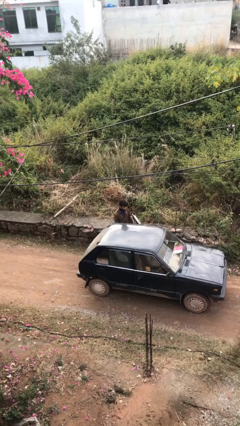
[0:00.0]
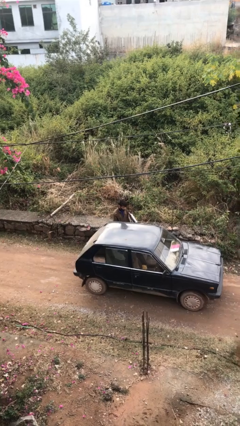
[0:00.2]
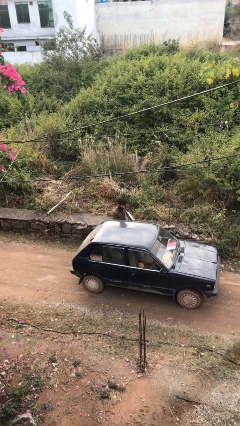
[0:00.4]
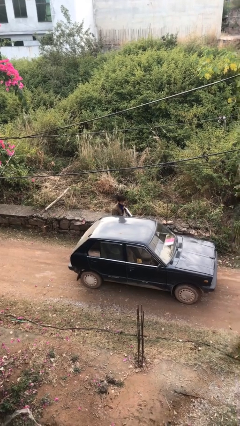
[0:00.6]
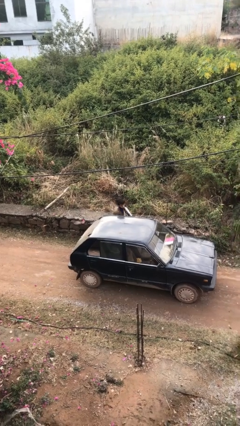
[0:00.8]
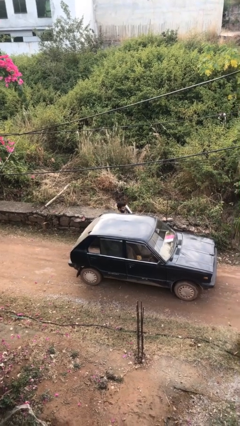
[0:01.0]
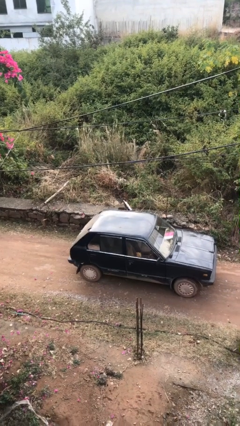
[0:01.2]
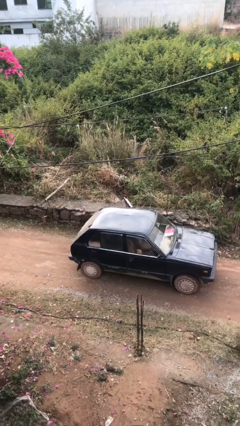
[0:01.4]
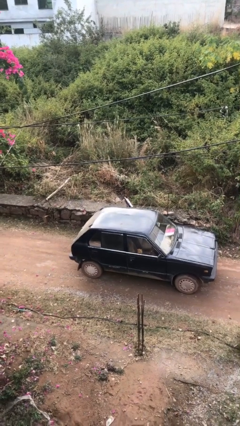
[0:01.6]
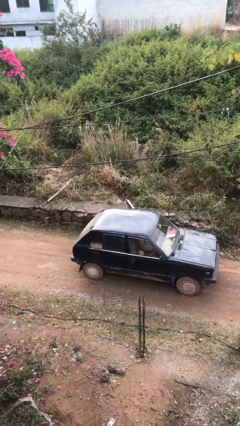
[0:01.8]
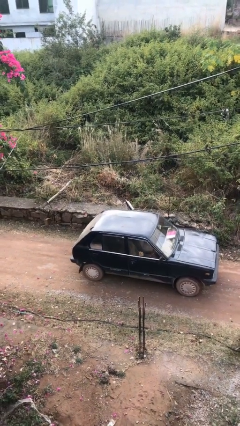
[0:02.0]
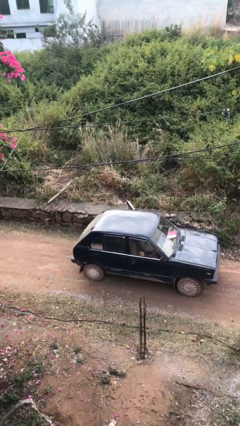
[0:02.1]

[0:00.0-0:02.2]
person enters car

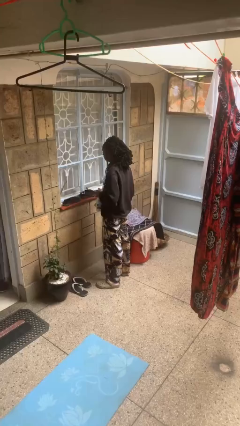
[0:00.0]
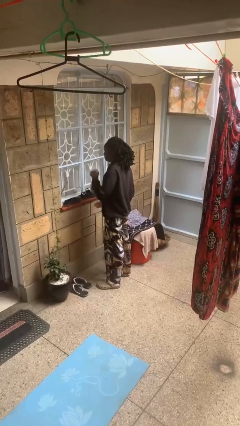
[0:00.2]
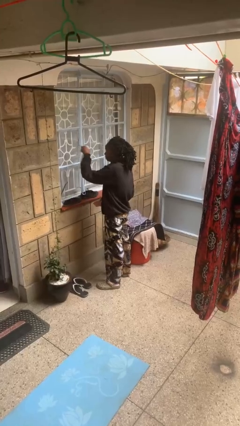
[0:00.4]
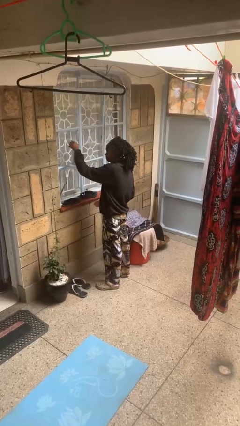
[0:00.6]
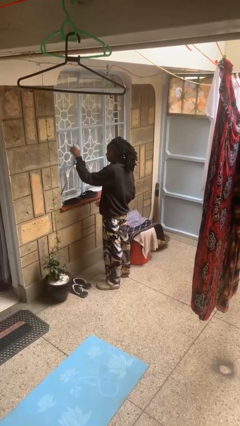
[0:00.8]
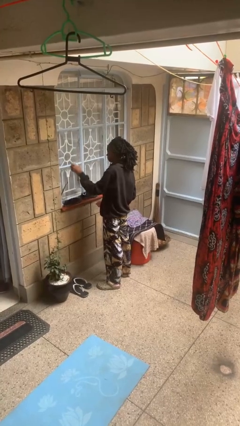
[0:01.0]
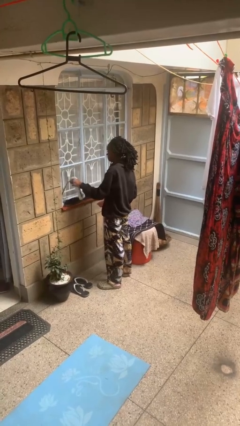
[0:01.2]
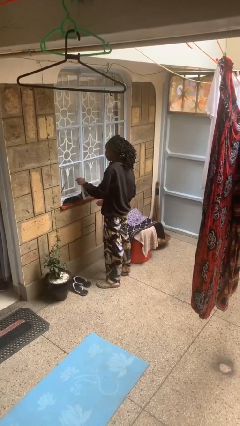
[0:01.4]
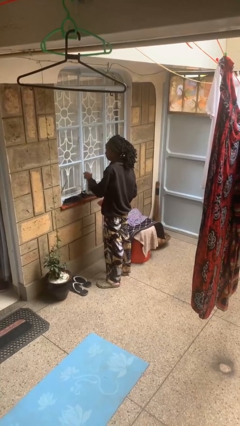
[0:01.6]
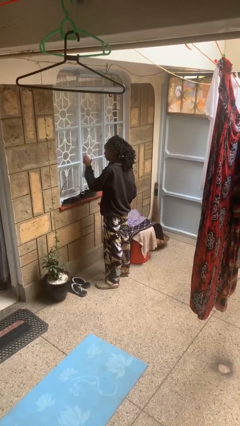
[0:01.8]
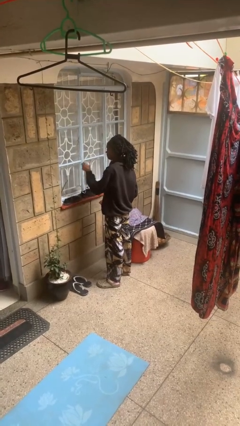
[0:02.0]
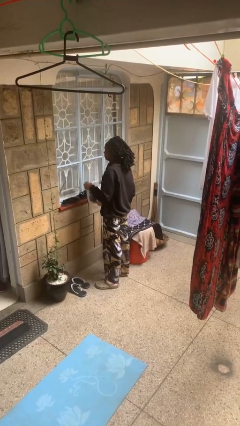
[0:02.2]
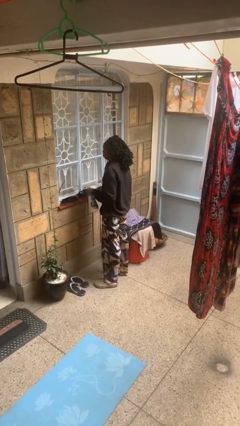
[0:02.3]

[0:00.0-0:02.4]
person sprays from bottle

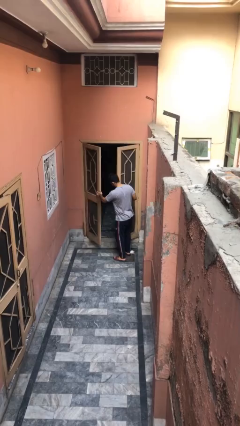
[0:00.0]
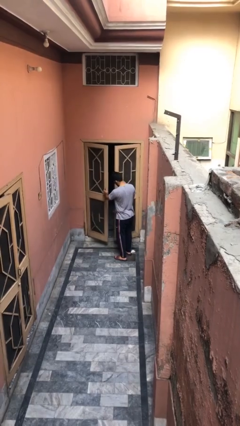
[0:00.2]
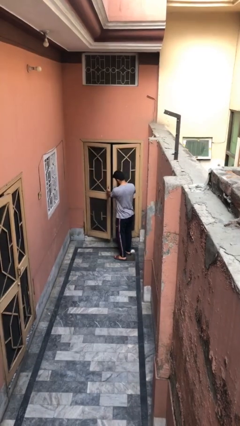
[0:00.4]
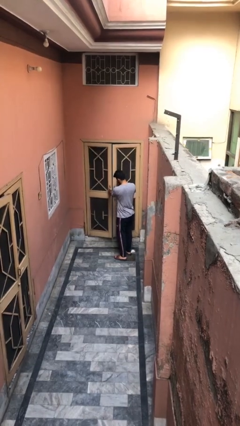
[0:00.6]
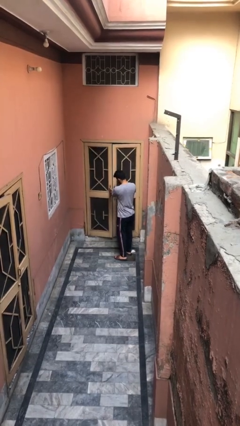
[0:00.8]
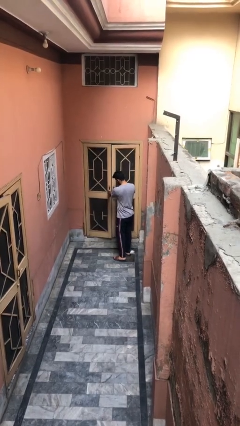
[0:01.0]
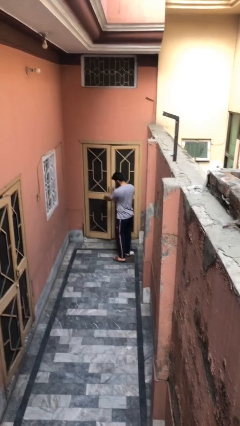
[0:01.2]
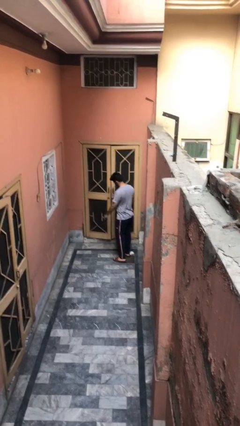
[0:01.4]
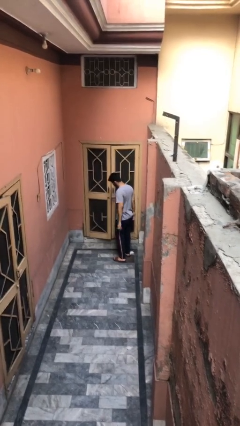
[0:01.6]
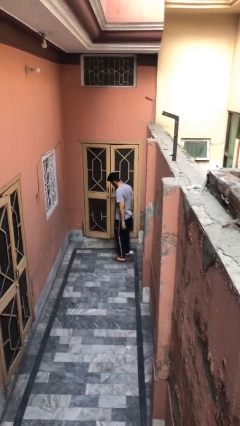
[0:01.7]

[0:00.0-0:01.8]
person closes gate

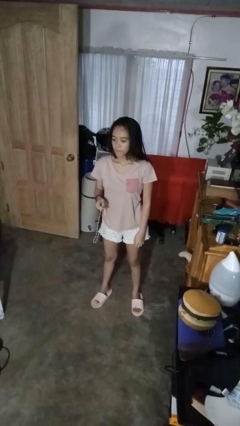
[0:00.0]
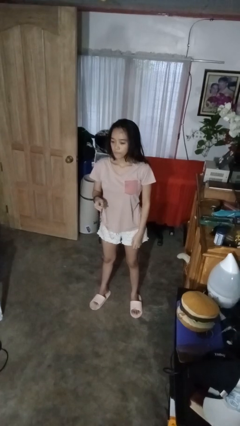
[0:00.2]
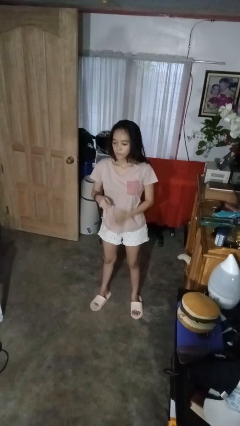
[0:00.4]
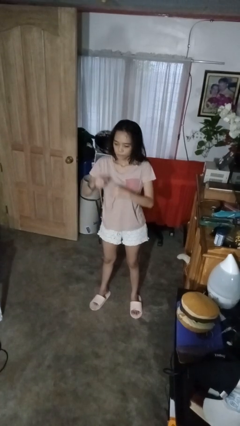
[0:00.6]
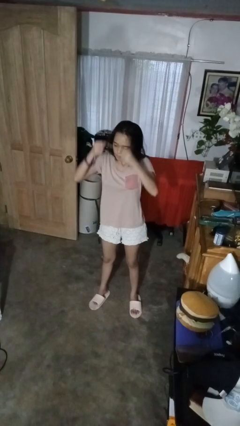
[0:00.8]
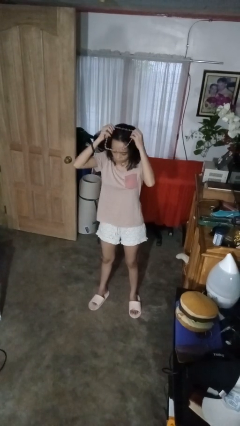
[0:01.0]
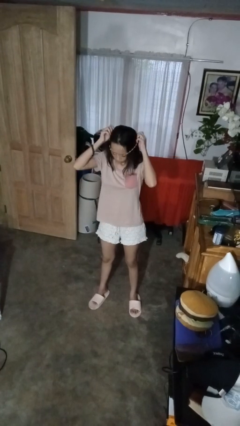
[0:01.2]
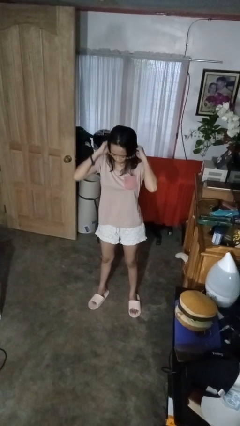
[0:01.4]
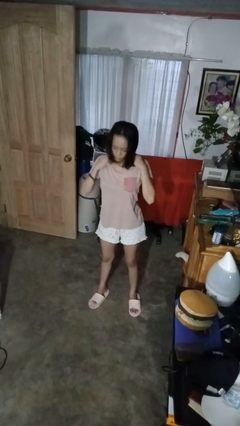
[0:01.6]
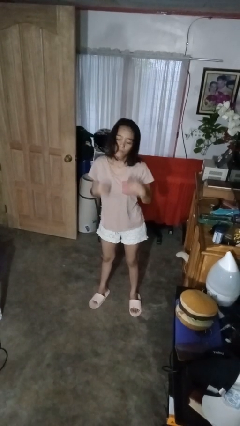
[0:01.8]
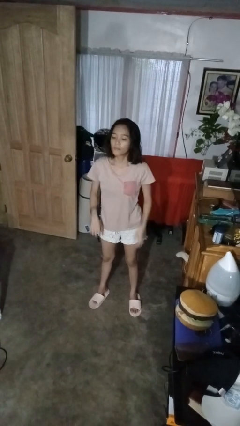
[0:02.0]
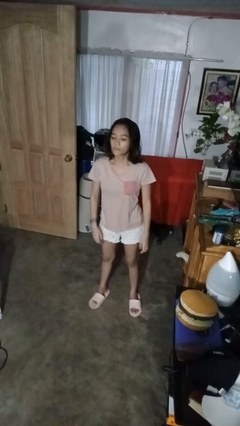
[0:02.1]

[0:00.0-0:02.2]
person puts on necklace

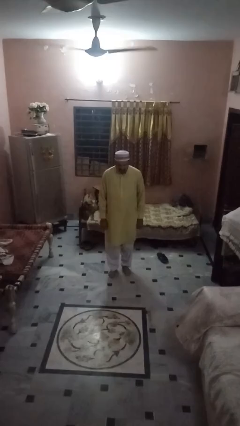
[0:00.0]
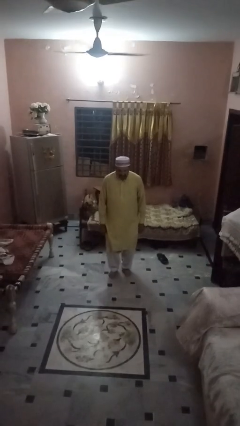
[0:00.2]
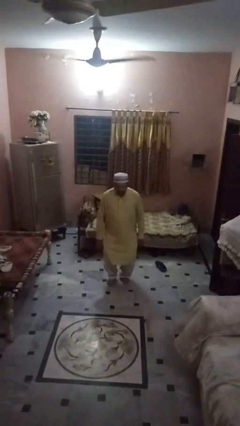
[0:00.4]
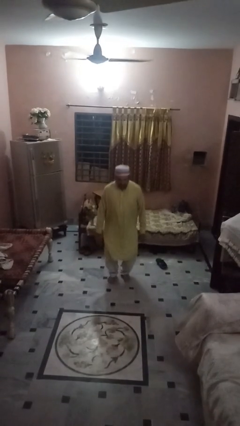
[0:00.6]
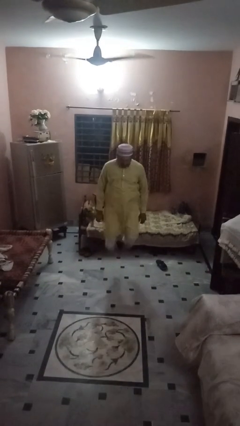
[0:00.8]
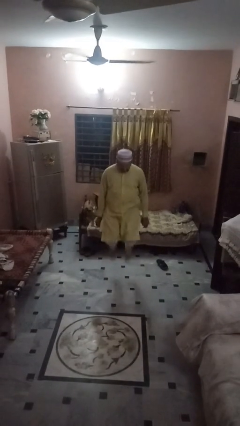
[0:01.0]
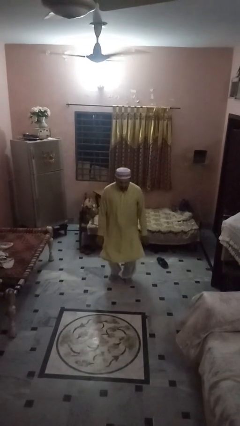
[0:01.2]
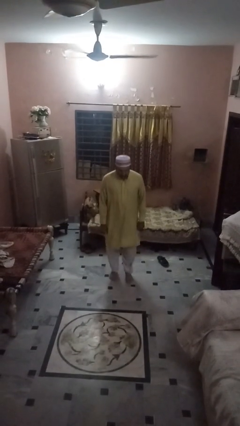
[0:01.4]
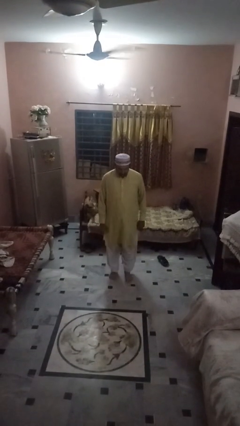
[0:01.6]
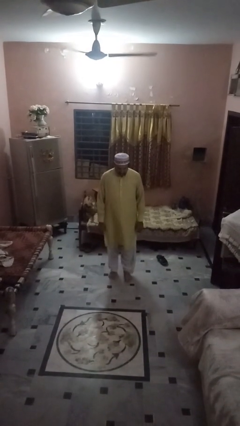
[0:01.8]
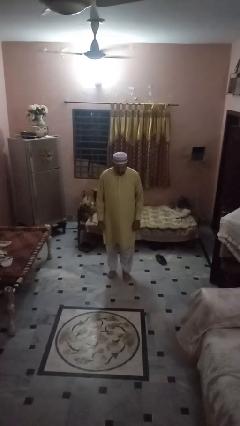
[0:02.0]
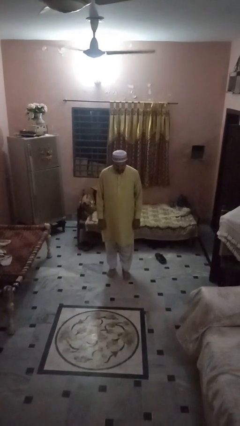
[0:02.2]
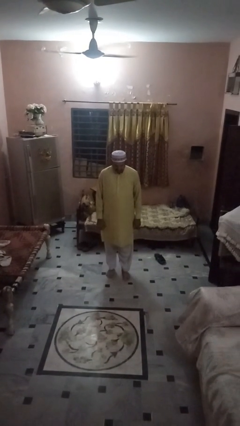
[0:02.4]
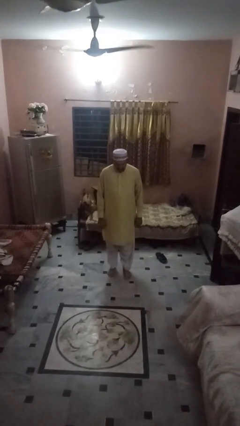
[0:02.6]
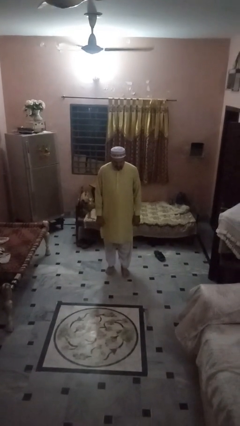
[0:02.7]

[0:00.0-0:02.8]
person jumps

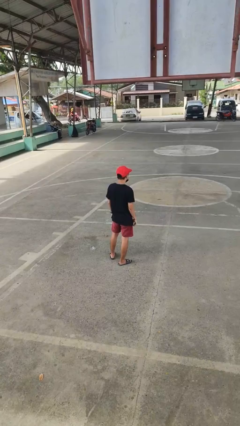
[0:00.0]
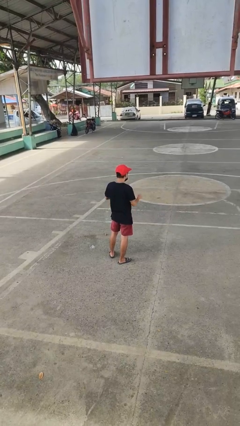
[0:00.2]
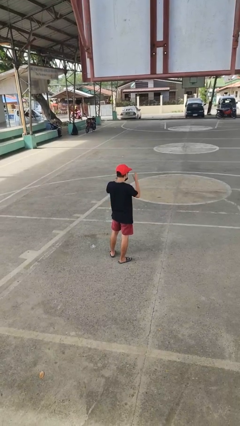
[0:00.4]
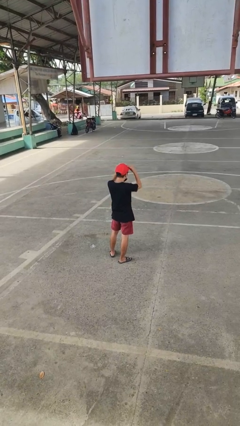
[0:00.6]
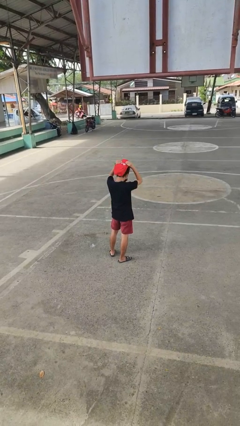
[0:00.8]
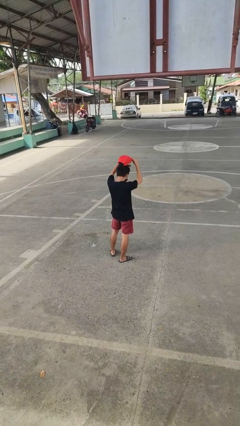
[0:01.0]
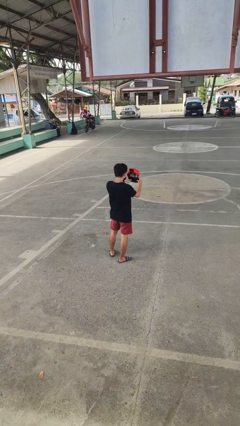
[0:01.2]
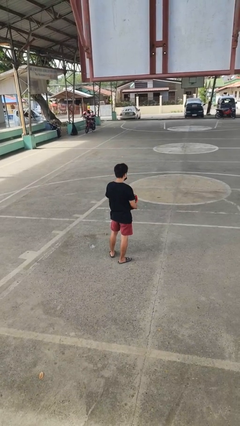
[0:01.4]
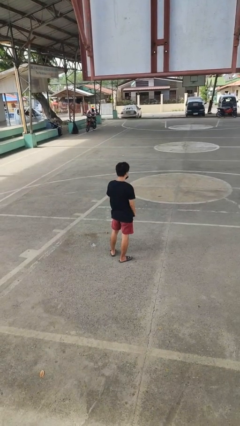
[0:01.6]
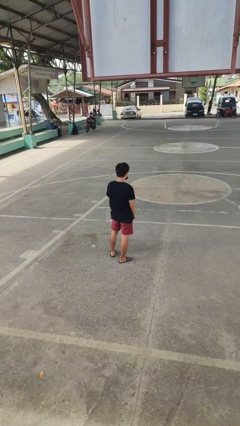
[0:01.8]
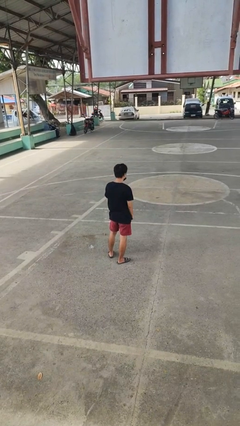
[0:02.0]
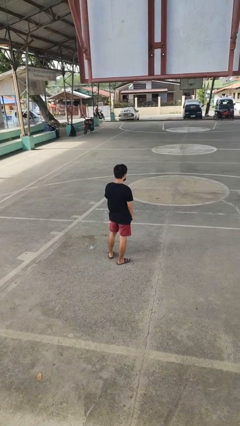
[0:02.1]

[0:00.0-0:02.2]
person takes off hat

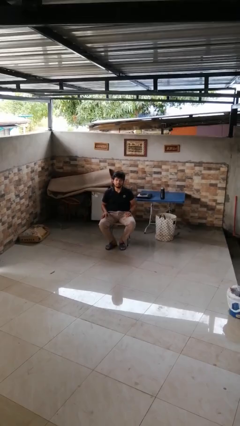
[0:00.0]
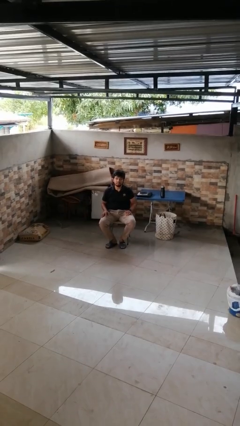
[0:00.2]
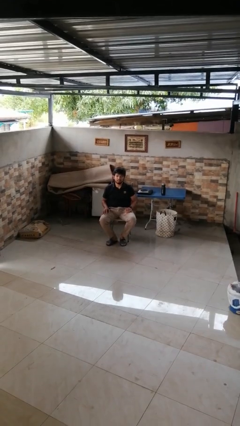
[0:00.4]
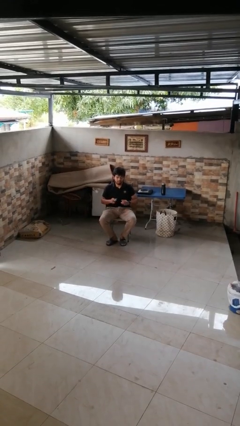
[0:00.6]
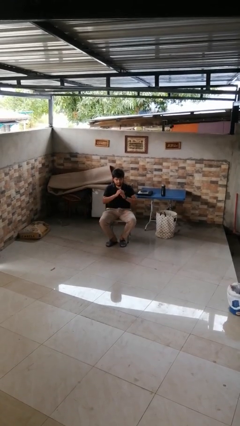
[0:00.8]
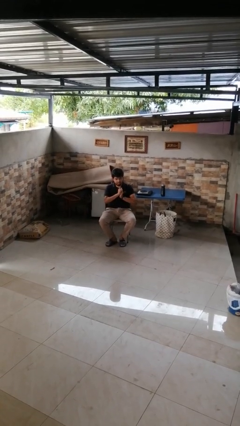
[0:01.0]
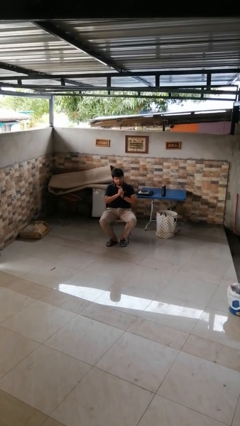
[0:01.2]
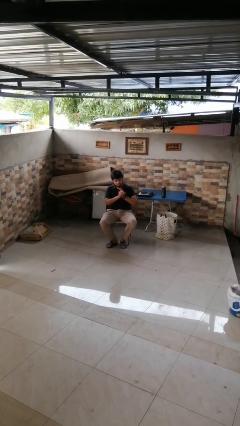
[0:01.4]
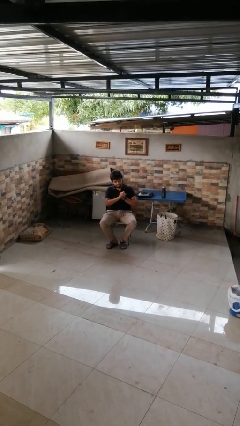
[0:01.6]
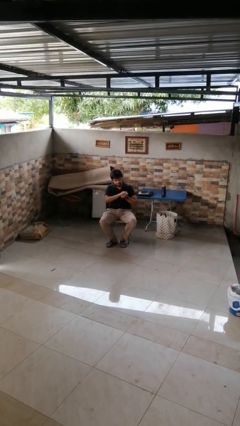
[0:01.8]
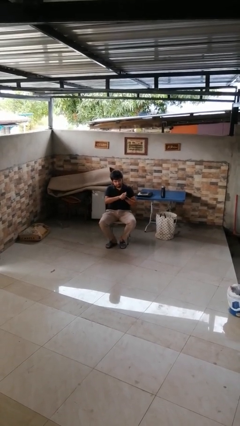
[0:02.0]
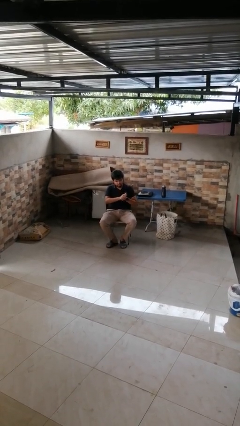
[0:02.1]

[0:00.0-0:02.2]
person cracks knuckles

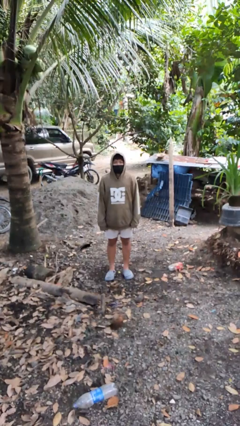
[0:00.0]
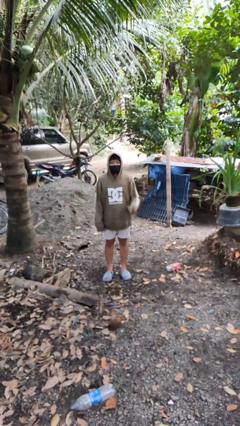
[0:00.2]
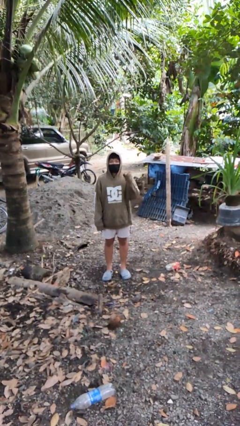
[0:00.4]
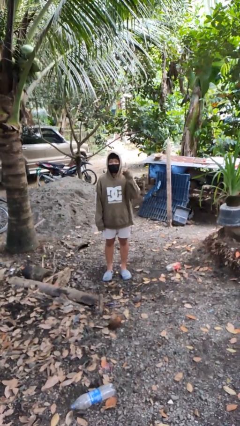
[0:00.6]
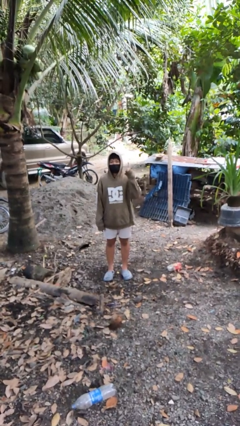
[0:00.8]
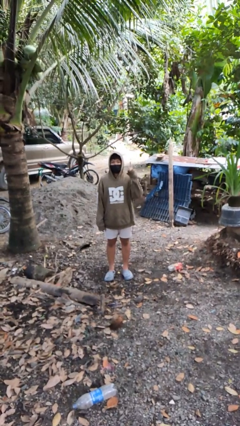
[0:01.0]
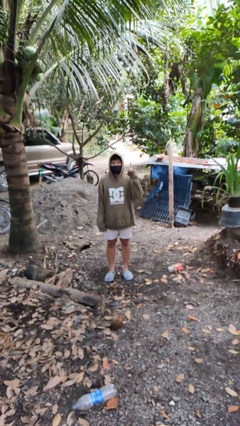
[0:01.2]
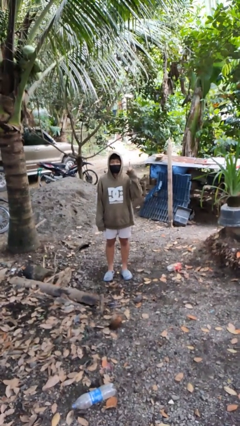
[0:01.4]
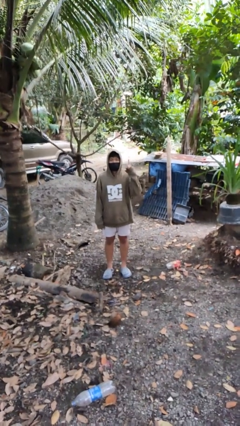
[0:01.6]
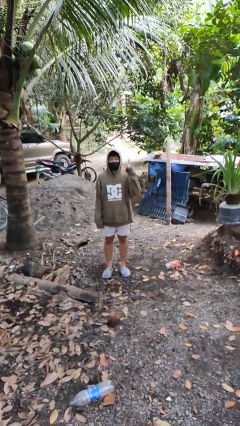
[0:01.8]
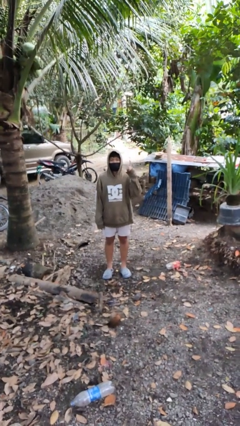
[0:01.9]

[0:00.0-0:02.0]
person gestures number one
